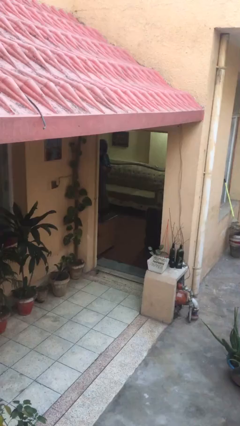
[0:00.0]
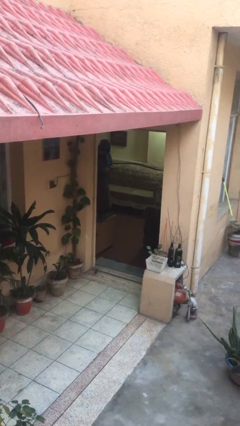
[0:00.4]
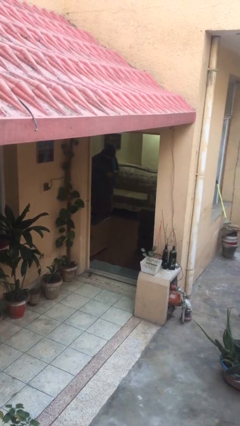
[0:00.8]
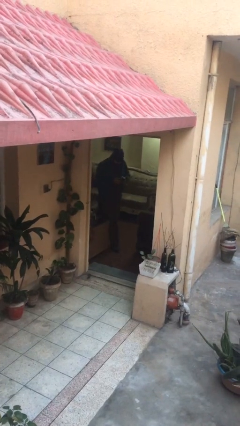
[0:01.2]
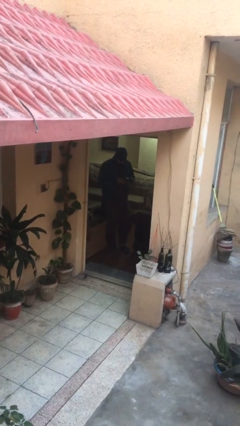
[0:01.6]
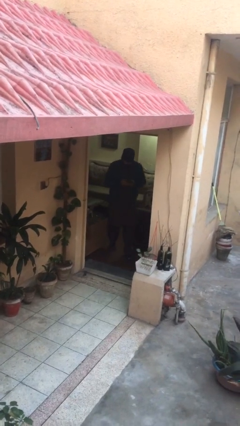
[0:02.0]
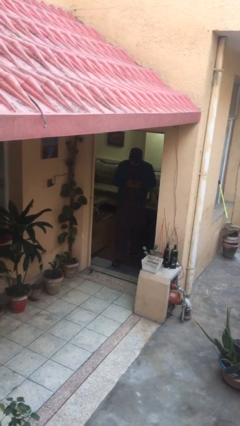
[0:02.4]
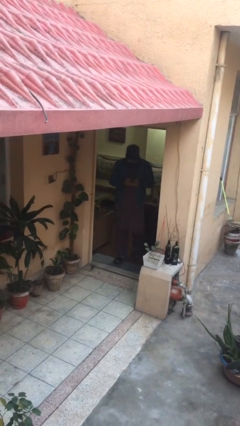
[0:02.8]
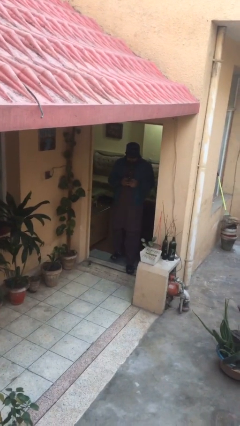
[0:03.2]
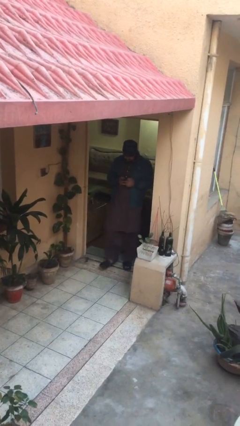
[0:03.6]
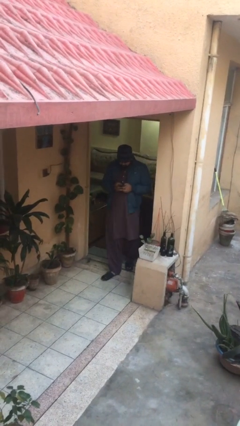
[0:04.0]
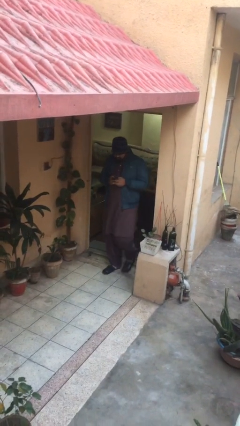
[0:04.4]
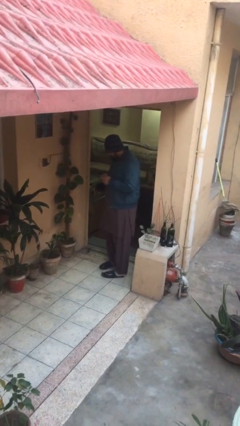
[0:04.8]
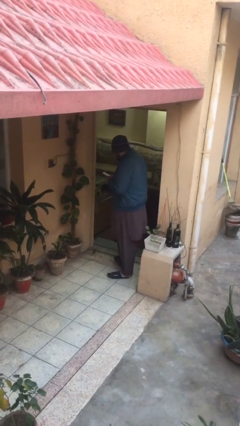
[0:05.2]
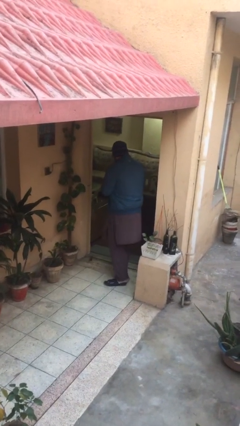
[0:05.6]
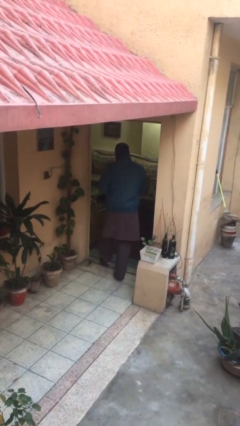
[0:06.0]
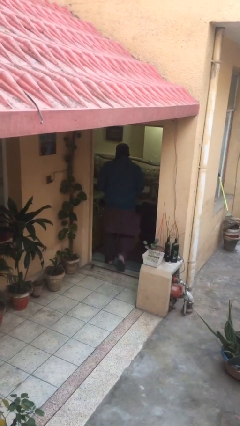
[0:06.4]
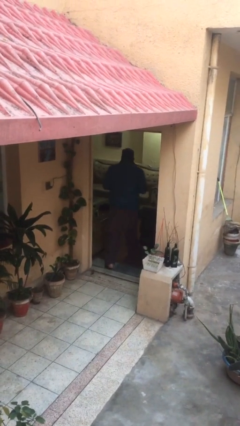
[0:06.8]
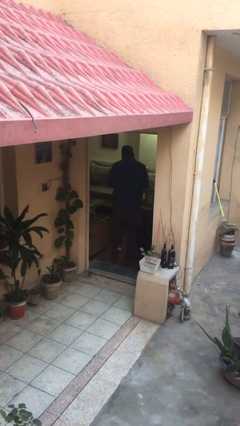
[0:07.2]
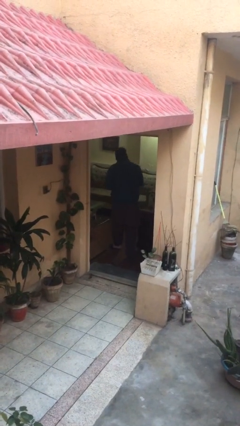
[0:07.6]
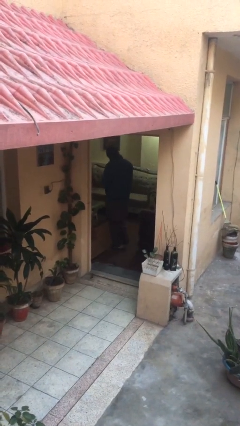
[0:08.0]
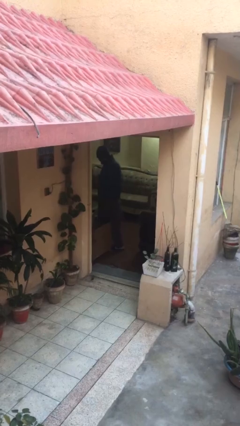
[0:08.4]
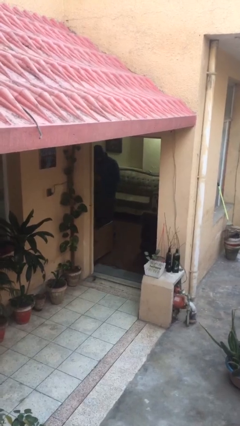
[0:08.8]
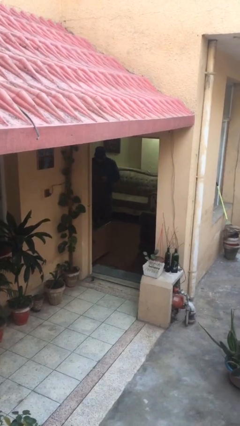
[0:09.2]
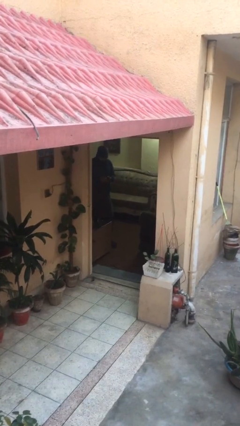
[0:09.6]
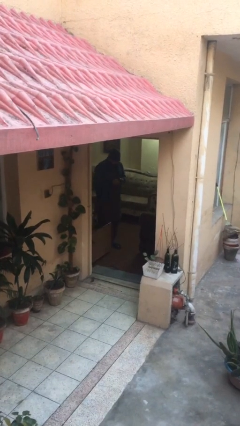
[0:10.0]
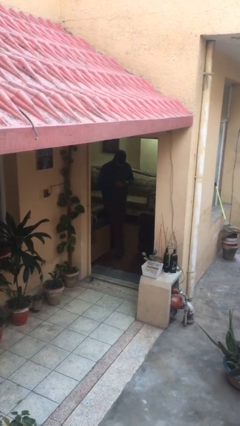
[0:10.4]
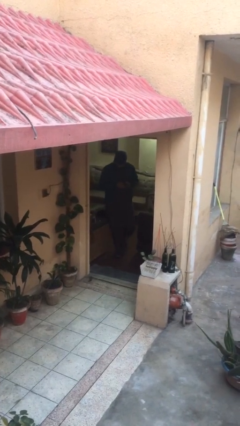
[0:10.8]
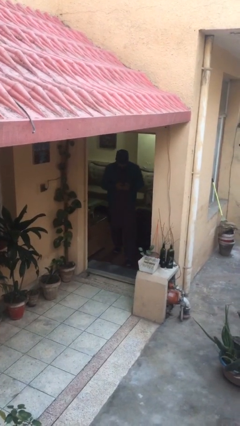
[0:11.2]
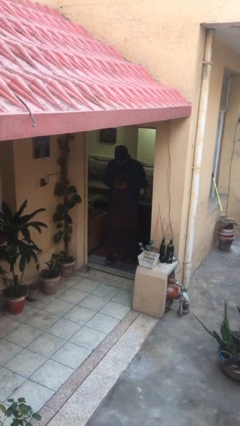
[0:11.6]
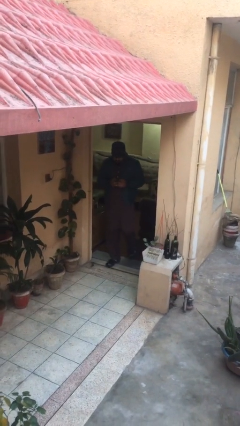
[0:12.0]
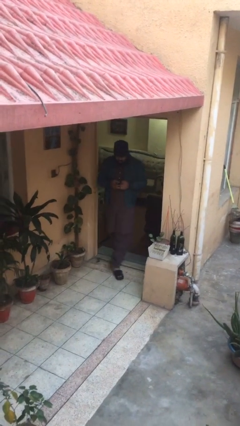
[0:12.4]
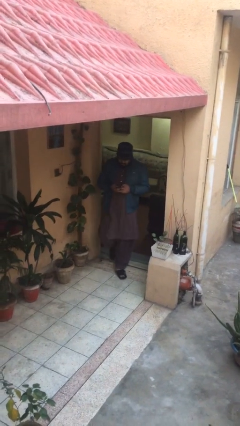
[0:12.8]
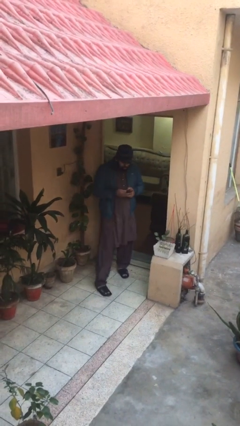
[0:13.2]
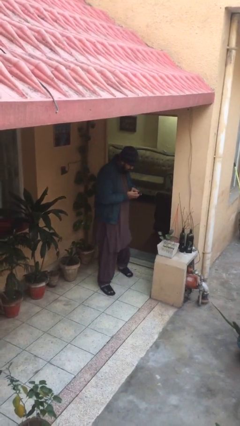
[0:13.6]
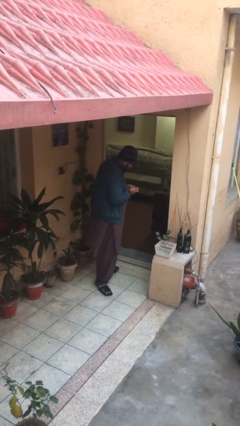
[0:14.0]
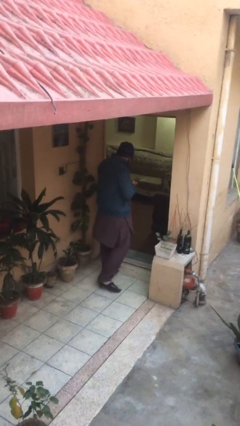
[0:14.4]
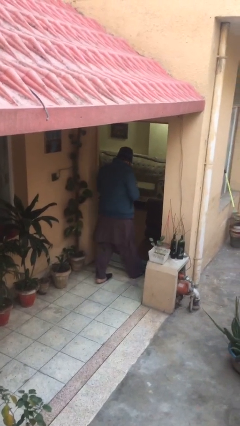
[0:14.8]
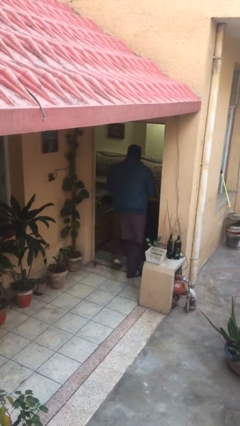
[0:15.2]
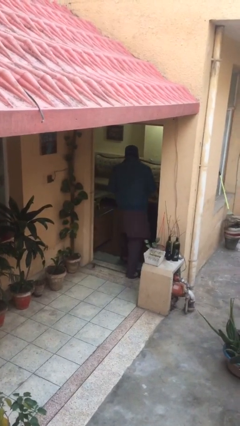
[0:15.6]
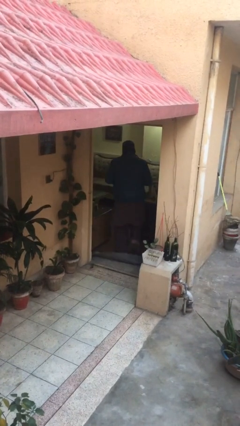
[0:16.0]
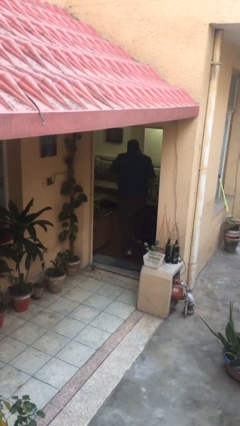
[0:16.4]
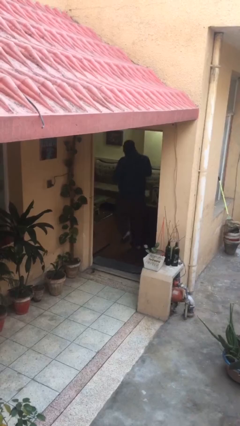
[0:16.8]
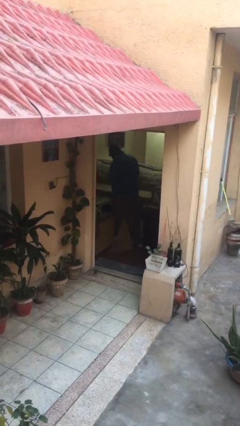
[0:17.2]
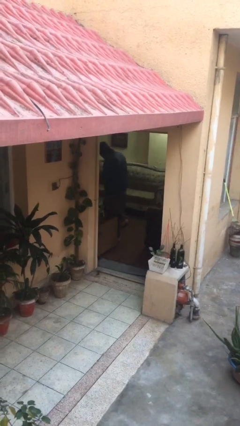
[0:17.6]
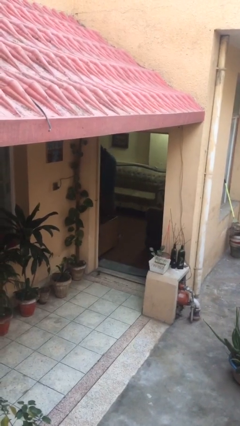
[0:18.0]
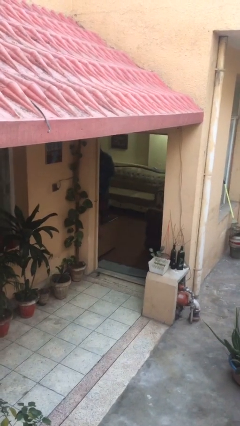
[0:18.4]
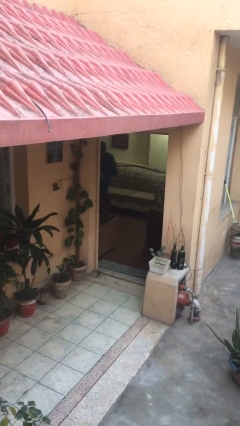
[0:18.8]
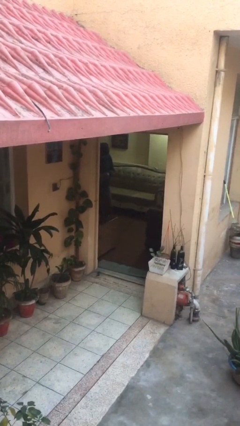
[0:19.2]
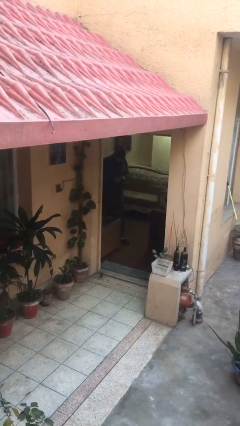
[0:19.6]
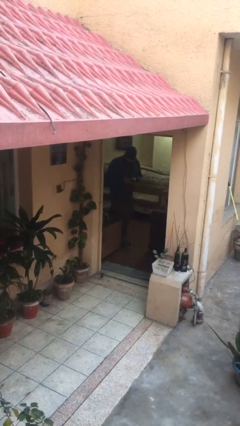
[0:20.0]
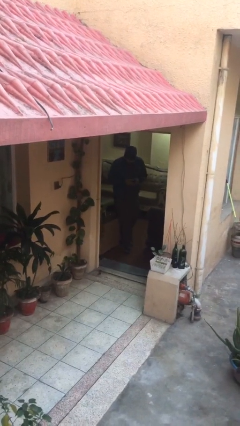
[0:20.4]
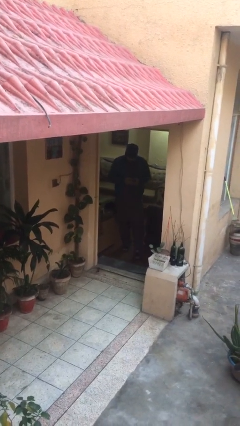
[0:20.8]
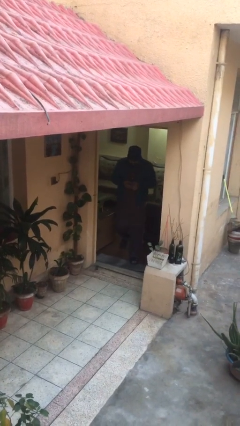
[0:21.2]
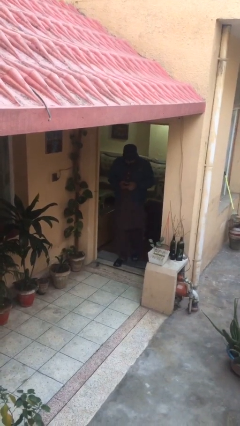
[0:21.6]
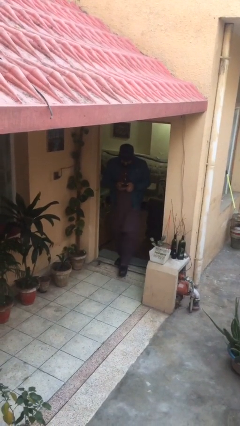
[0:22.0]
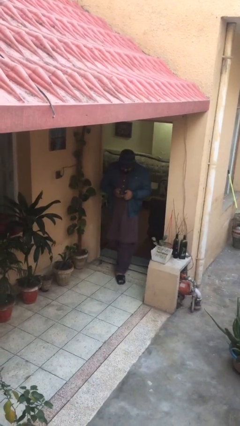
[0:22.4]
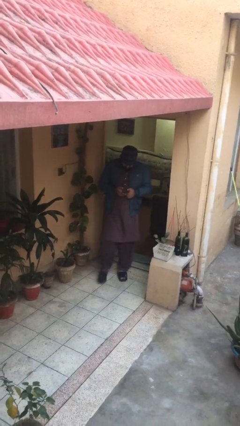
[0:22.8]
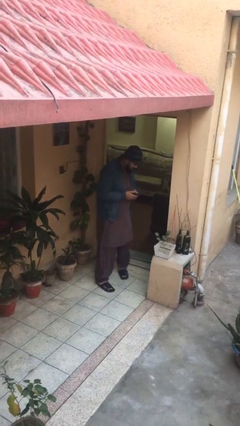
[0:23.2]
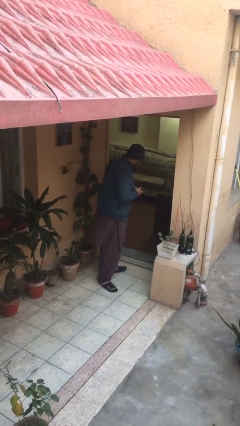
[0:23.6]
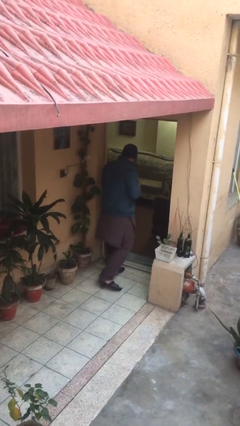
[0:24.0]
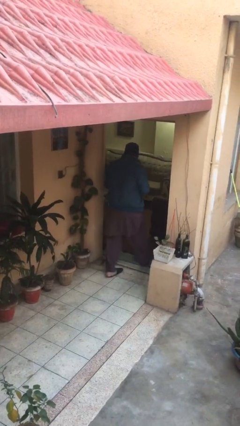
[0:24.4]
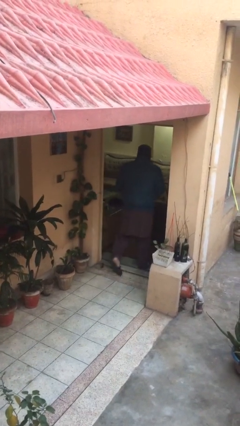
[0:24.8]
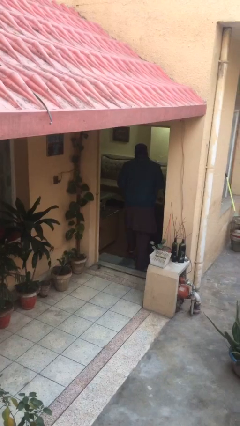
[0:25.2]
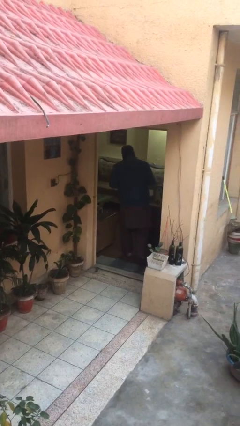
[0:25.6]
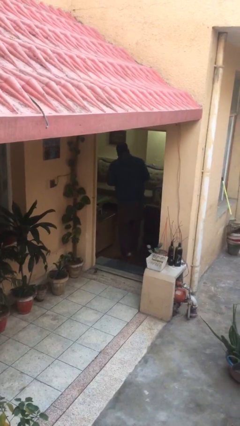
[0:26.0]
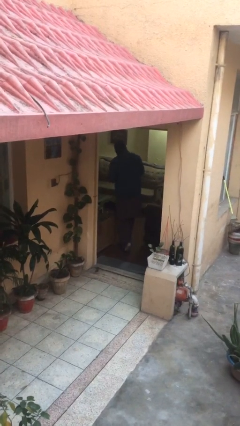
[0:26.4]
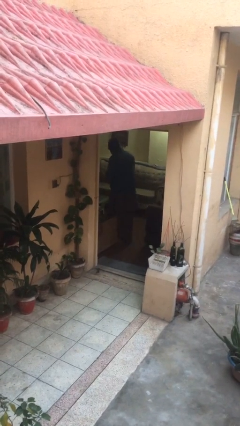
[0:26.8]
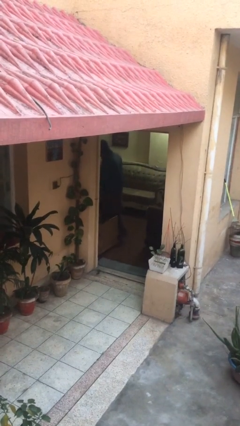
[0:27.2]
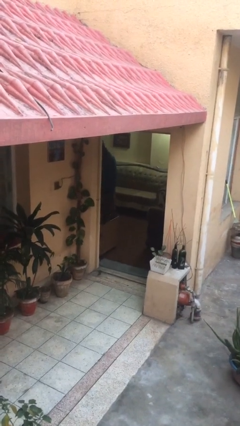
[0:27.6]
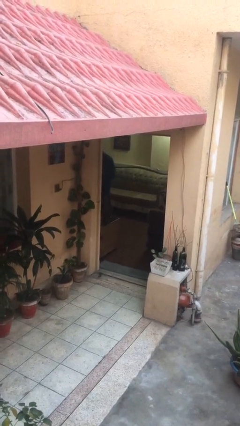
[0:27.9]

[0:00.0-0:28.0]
person texts on phone

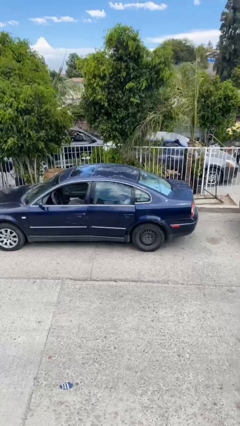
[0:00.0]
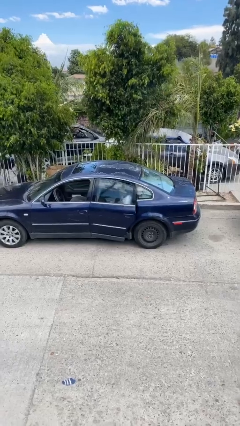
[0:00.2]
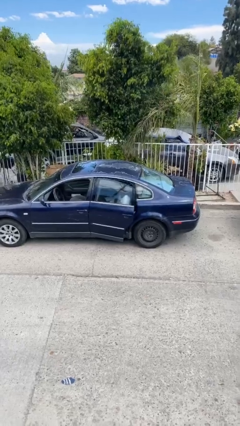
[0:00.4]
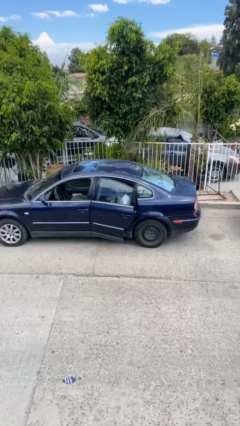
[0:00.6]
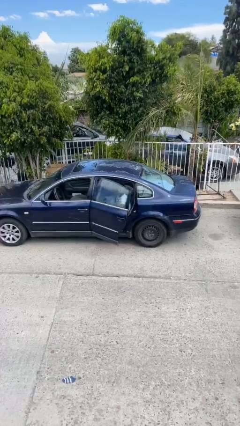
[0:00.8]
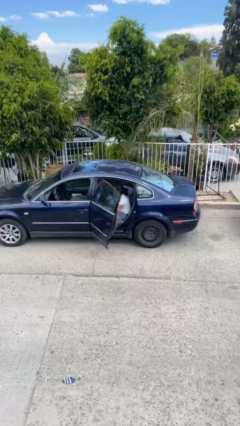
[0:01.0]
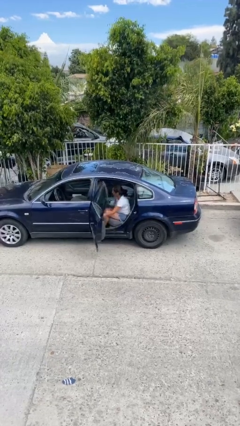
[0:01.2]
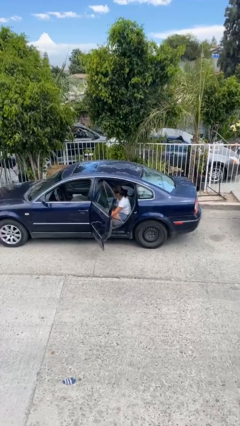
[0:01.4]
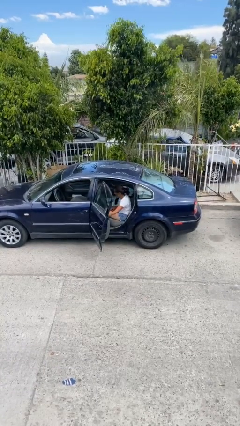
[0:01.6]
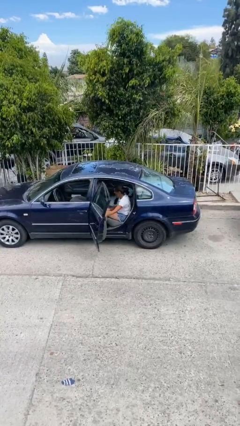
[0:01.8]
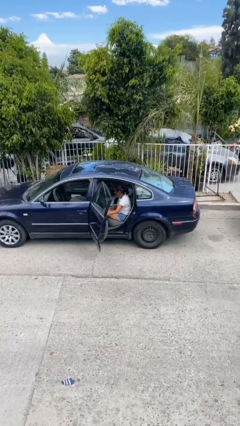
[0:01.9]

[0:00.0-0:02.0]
person opens car door

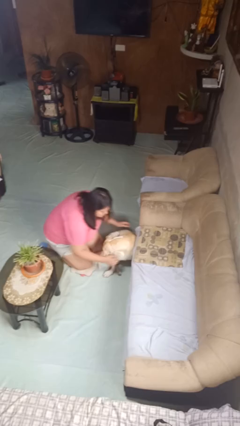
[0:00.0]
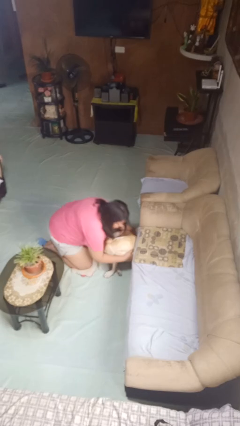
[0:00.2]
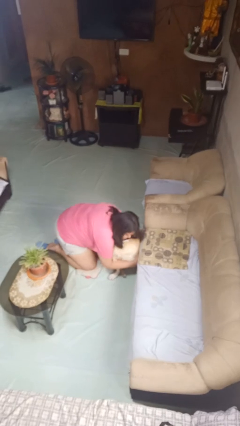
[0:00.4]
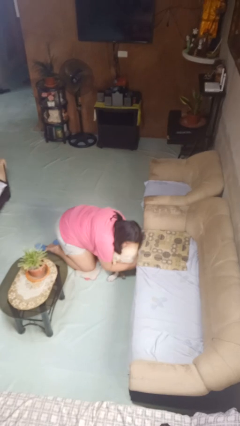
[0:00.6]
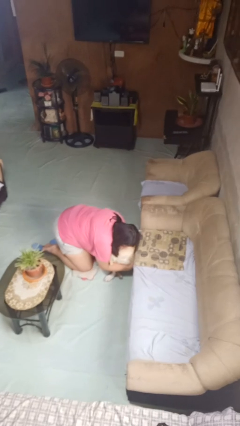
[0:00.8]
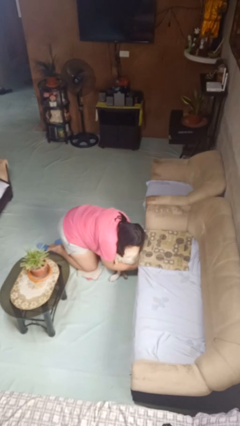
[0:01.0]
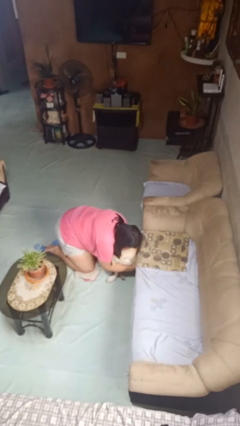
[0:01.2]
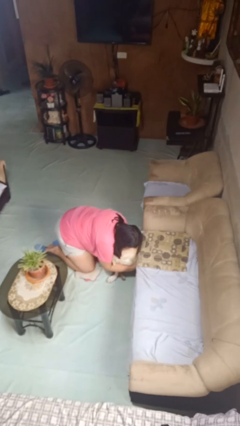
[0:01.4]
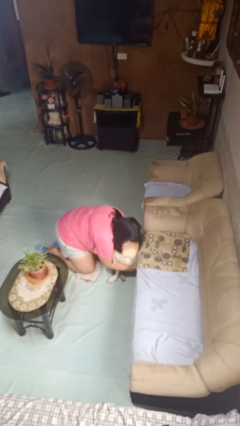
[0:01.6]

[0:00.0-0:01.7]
person hugs dog

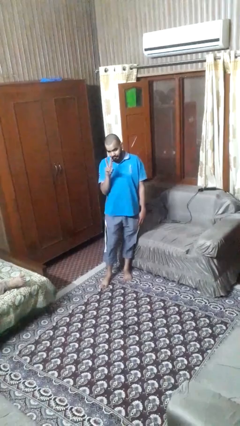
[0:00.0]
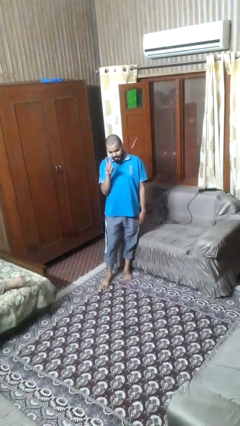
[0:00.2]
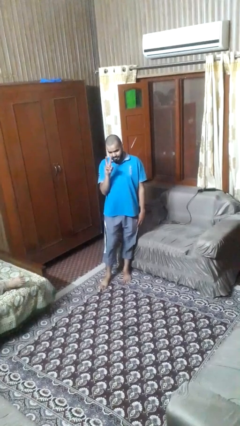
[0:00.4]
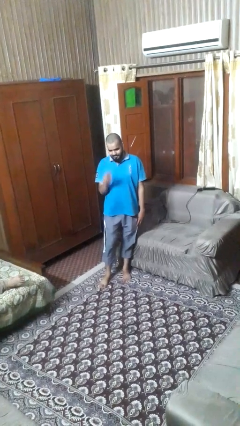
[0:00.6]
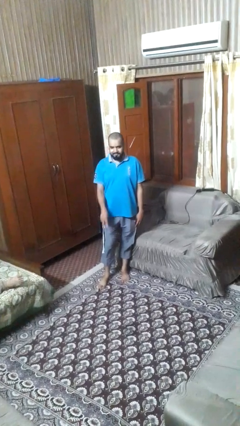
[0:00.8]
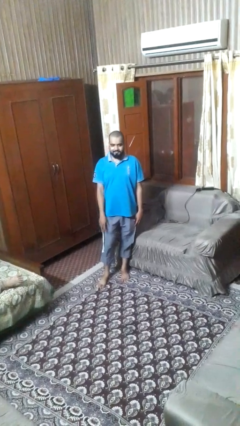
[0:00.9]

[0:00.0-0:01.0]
person gestures peace
